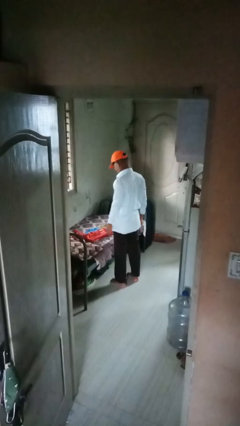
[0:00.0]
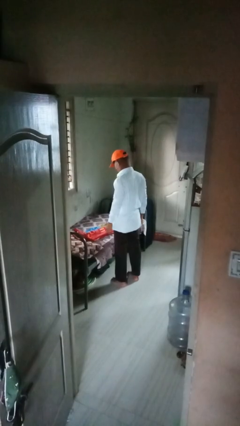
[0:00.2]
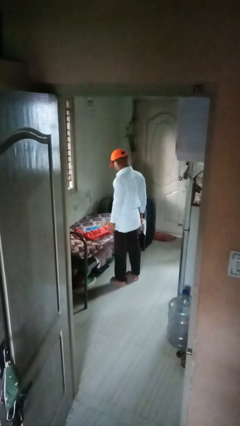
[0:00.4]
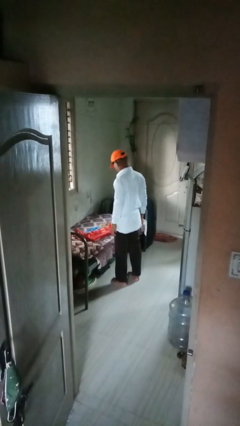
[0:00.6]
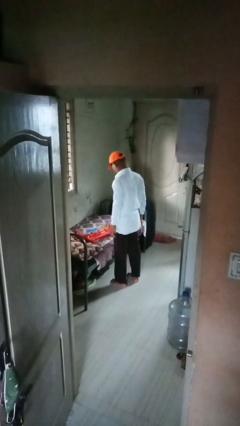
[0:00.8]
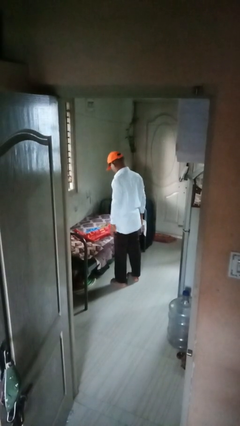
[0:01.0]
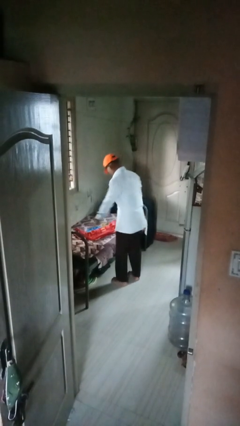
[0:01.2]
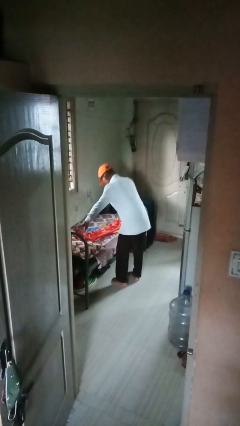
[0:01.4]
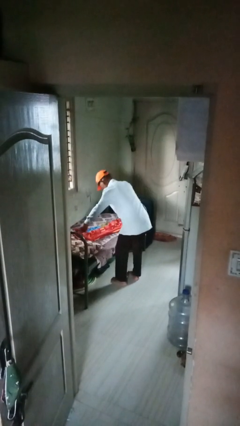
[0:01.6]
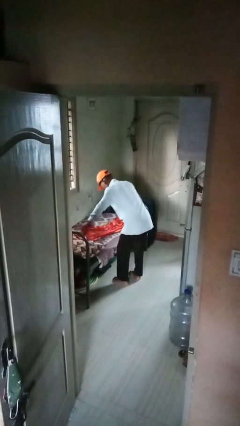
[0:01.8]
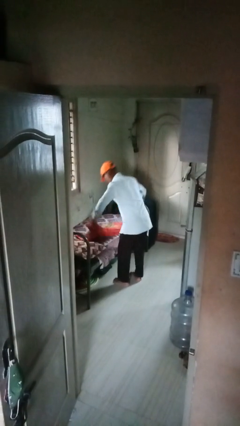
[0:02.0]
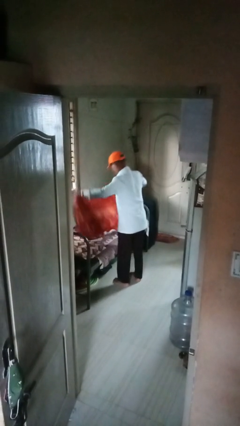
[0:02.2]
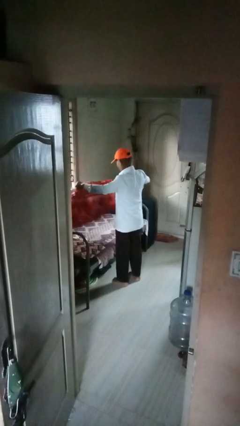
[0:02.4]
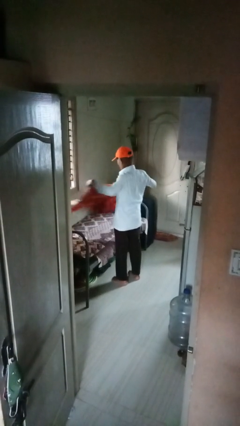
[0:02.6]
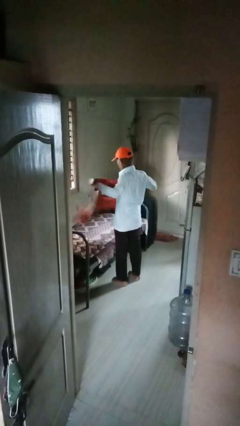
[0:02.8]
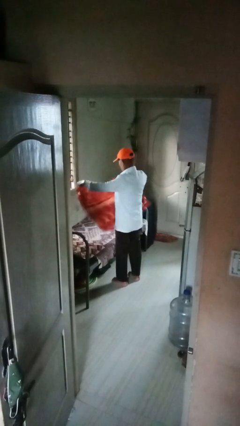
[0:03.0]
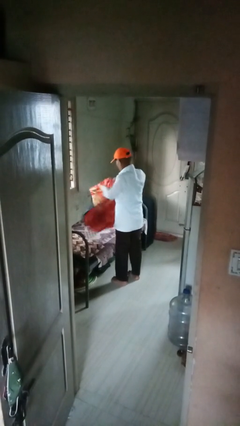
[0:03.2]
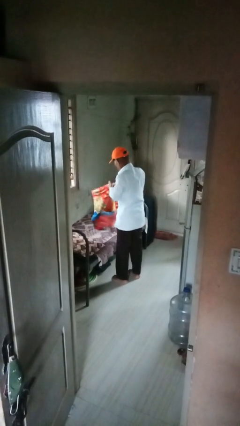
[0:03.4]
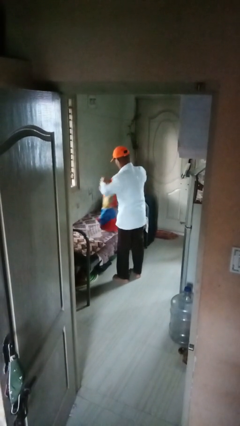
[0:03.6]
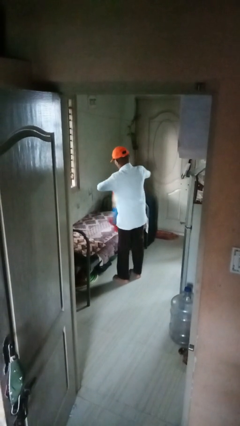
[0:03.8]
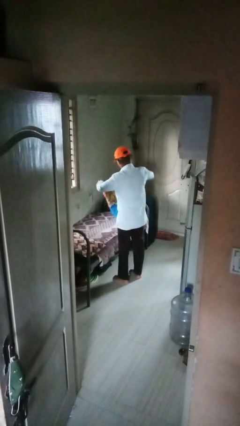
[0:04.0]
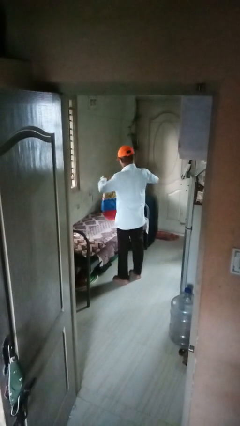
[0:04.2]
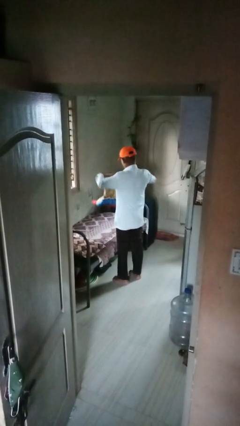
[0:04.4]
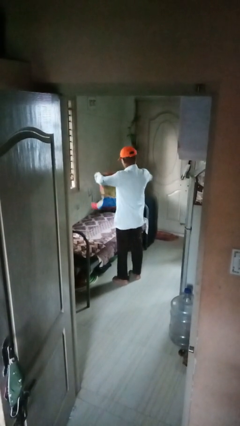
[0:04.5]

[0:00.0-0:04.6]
person folds blanket

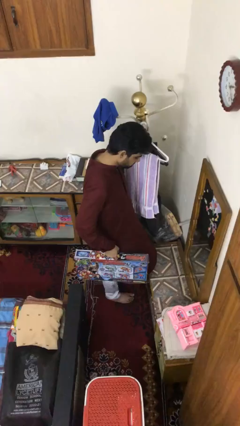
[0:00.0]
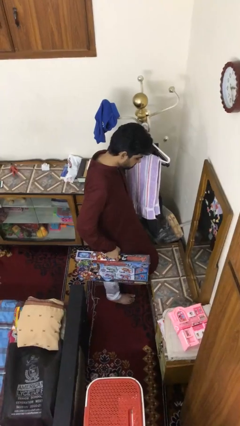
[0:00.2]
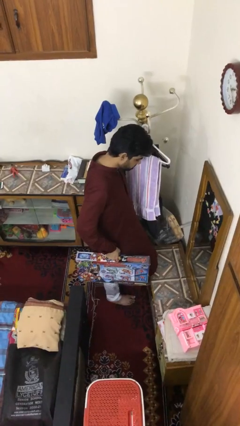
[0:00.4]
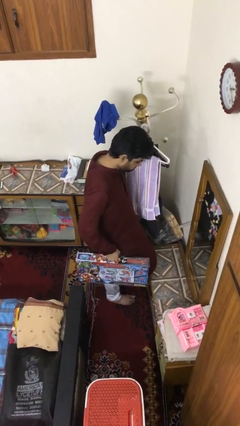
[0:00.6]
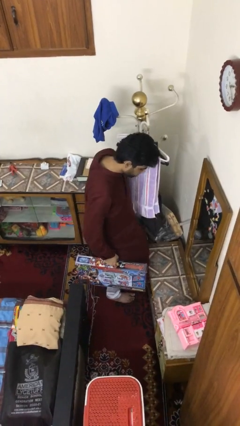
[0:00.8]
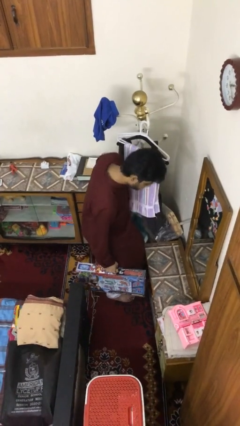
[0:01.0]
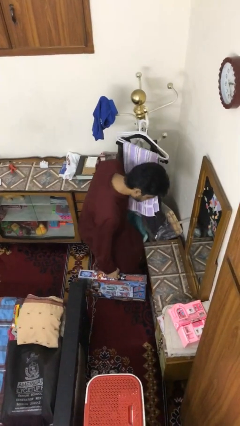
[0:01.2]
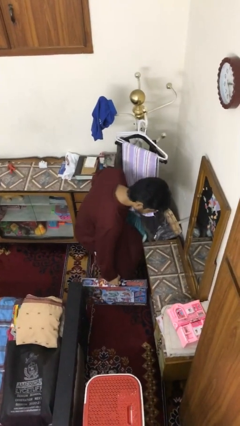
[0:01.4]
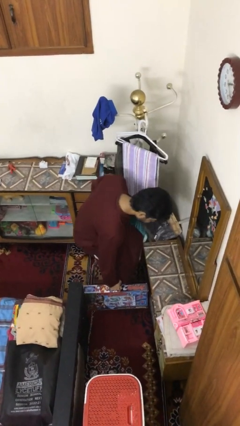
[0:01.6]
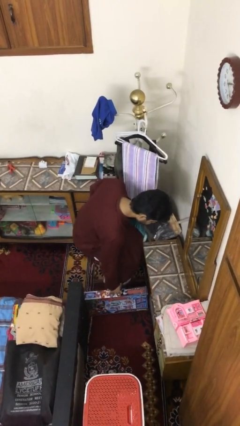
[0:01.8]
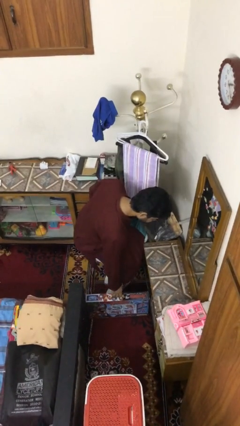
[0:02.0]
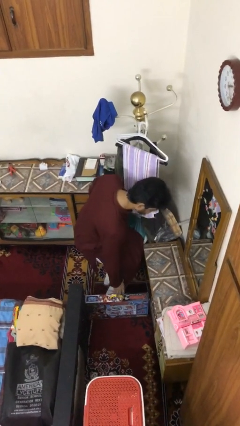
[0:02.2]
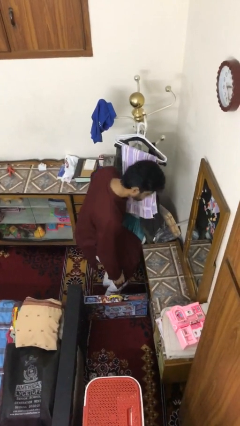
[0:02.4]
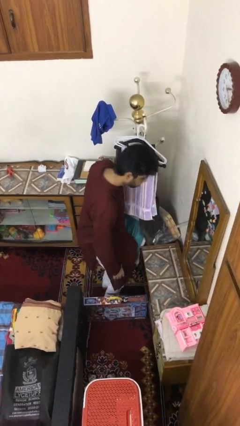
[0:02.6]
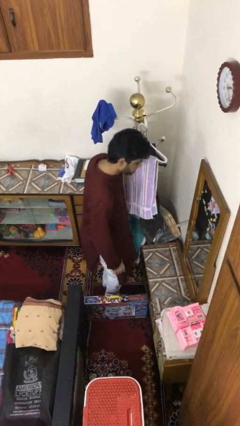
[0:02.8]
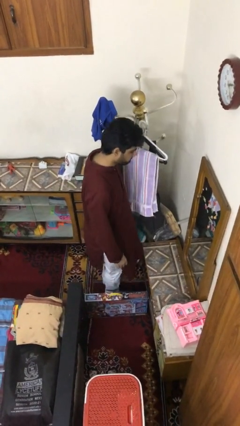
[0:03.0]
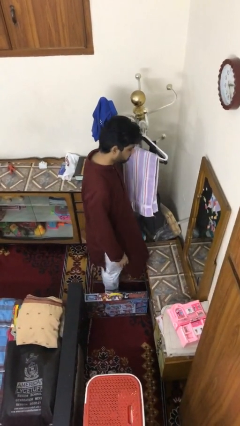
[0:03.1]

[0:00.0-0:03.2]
person puts down object on floor

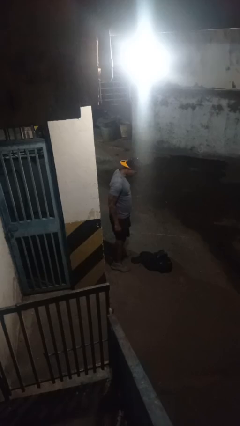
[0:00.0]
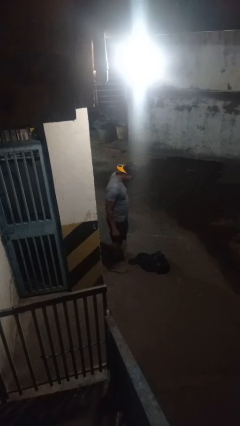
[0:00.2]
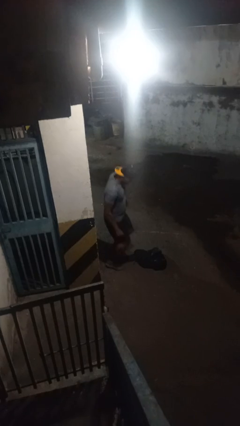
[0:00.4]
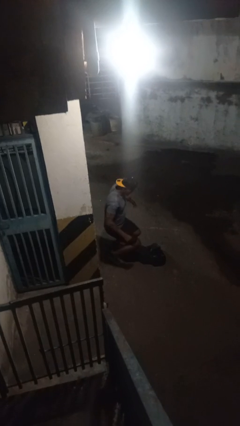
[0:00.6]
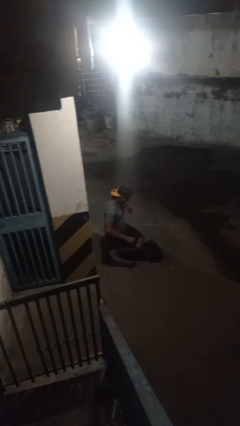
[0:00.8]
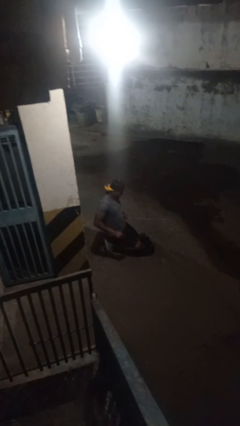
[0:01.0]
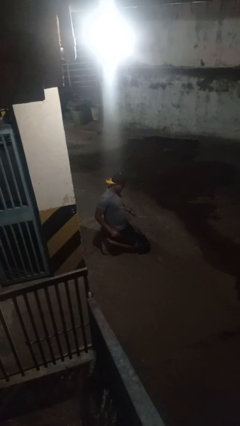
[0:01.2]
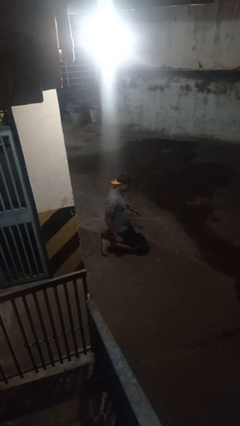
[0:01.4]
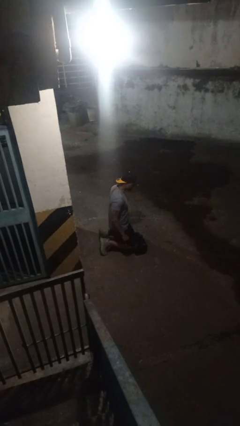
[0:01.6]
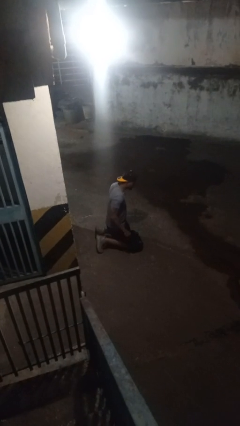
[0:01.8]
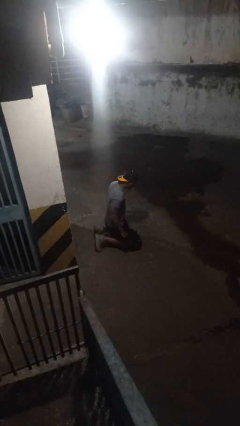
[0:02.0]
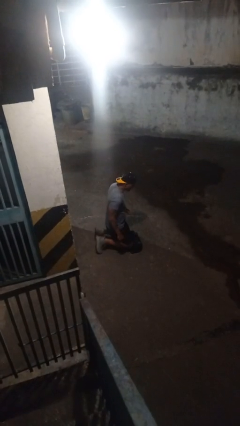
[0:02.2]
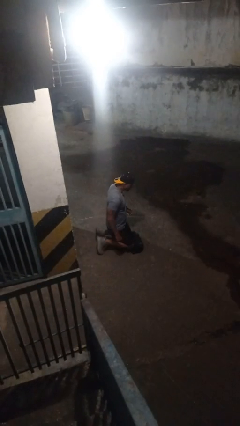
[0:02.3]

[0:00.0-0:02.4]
person kneels

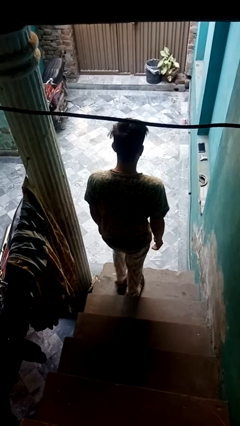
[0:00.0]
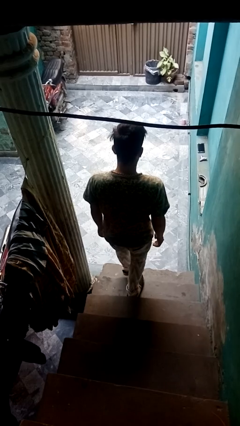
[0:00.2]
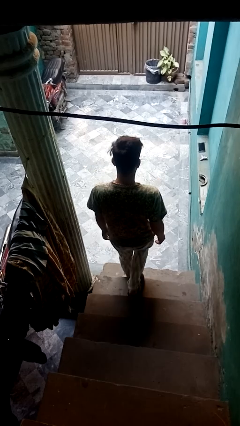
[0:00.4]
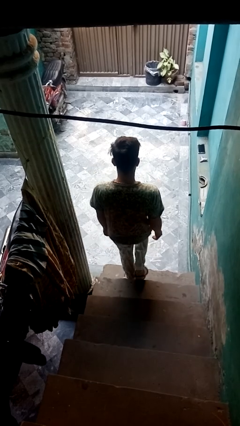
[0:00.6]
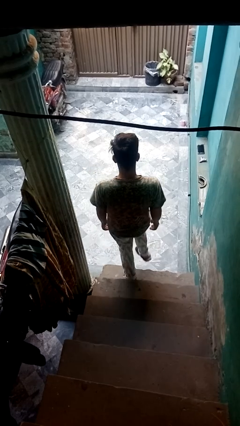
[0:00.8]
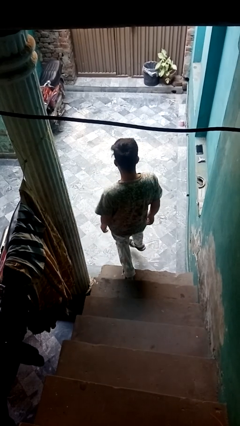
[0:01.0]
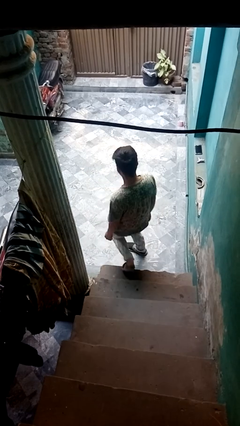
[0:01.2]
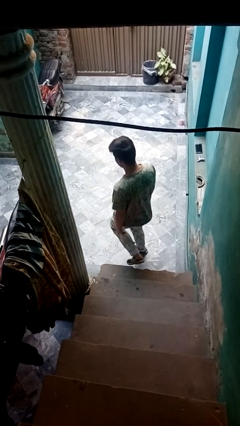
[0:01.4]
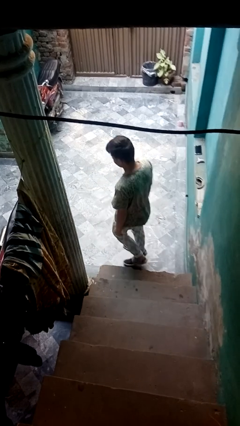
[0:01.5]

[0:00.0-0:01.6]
person climbs down stairs

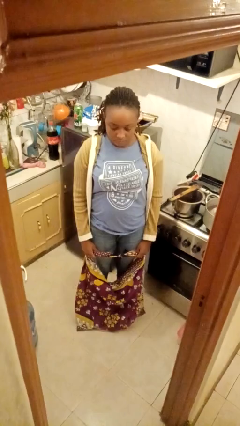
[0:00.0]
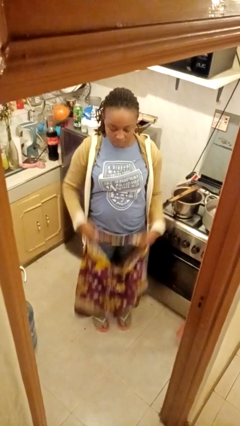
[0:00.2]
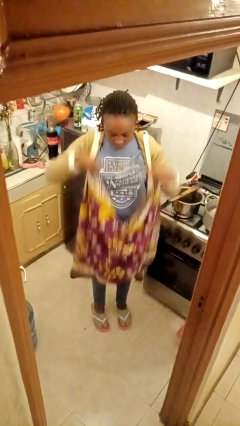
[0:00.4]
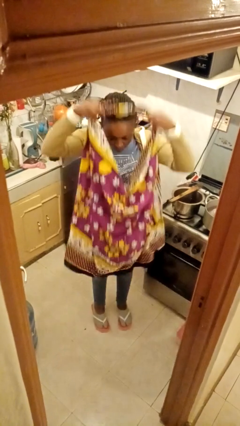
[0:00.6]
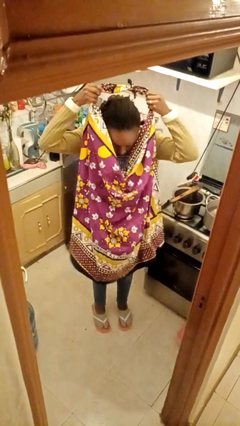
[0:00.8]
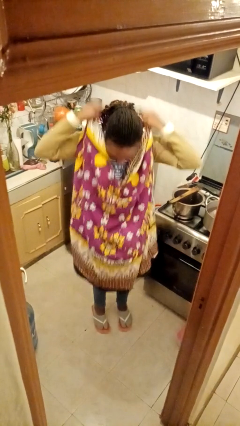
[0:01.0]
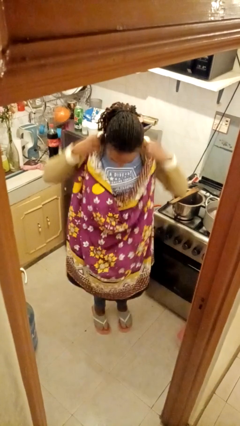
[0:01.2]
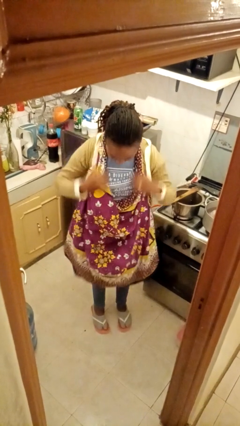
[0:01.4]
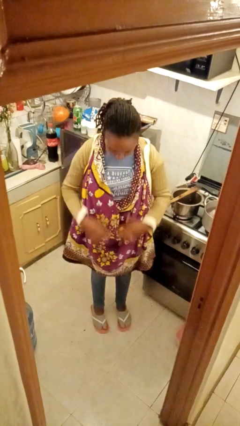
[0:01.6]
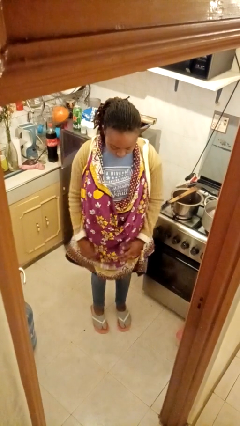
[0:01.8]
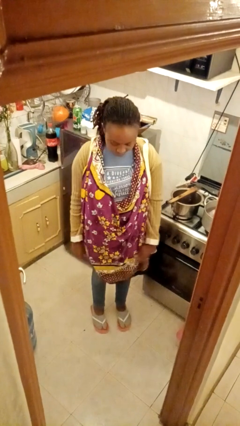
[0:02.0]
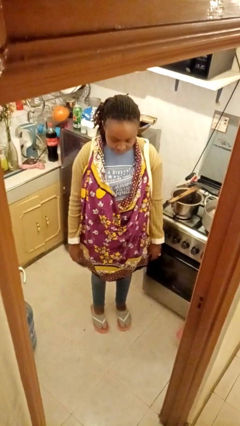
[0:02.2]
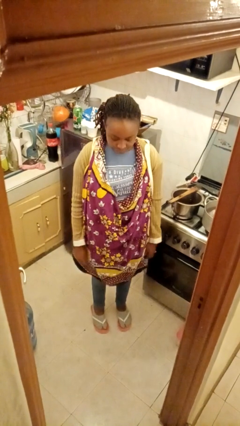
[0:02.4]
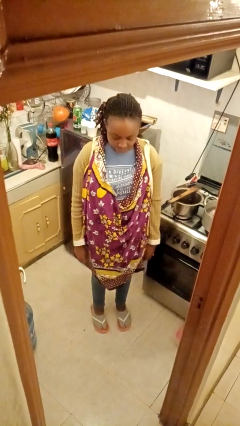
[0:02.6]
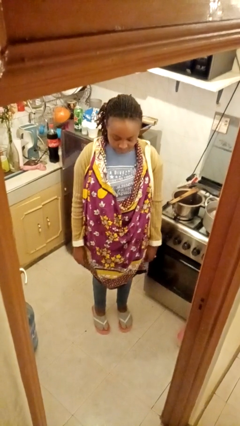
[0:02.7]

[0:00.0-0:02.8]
person puts on apron

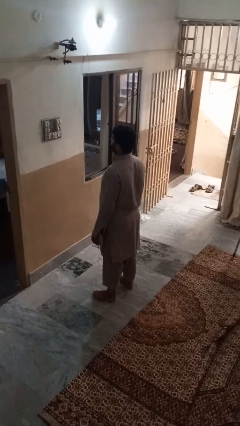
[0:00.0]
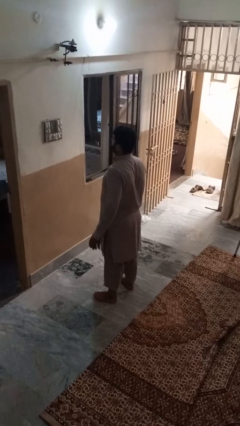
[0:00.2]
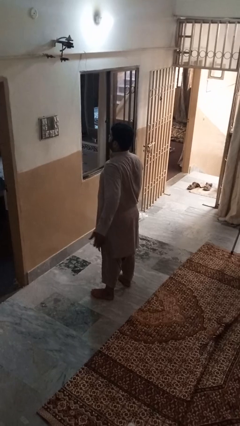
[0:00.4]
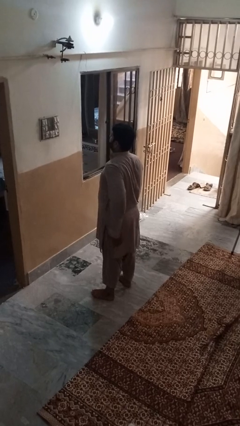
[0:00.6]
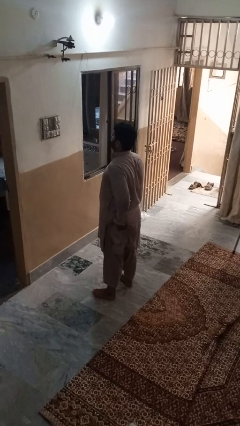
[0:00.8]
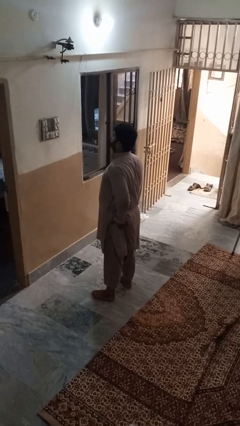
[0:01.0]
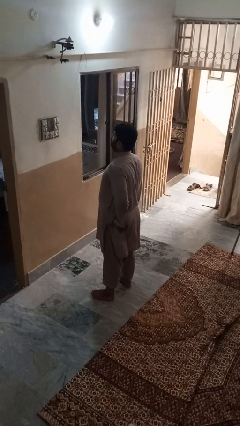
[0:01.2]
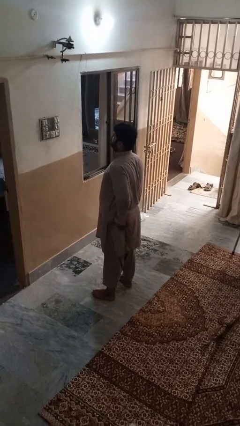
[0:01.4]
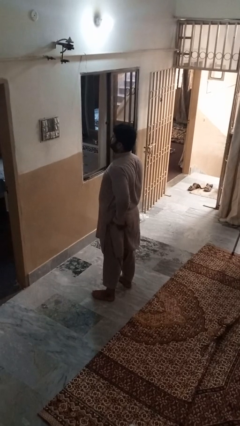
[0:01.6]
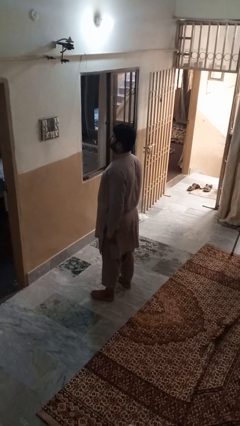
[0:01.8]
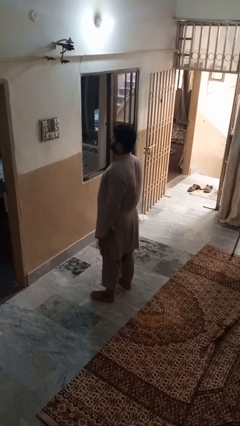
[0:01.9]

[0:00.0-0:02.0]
person wiggles hips

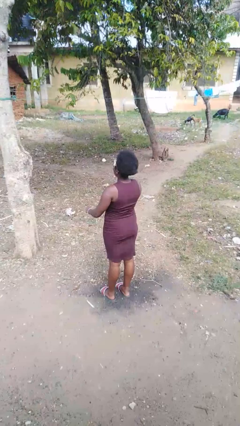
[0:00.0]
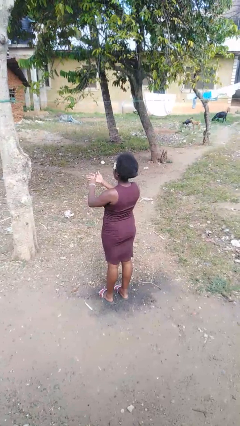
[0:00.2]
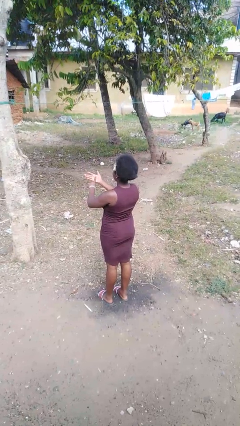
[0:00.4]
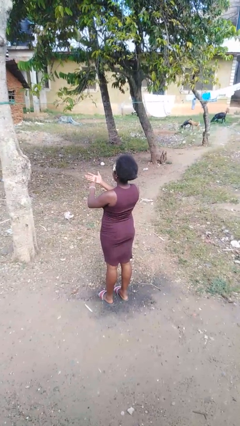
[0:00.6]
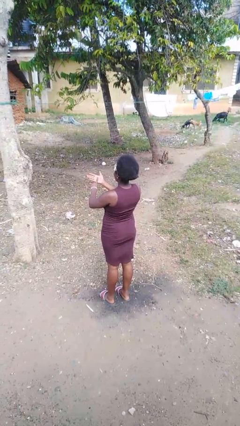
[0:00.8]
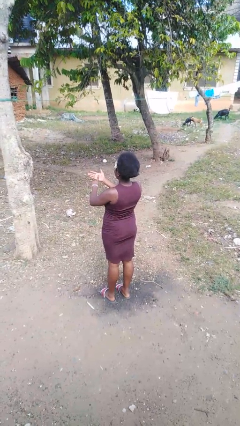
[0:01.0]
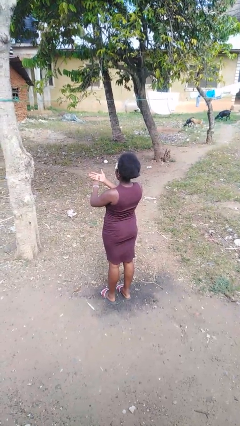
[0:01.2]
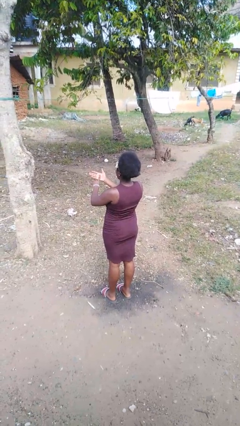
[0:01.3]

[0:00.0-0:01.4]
person gestures number one
